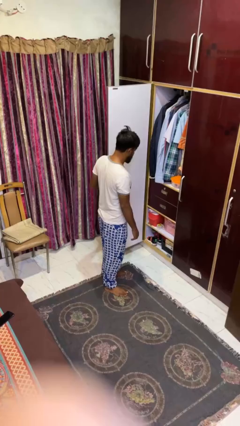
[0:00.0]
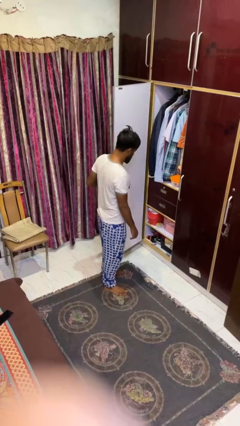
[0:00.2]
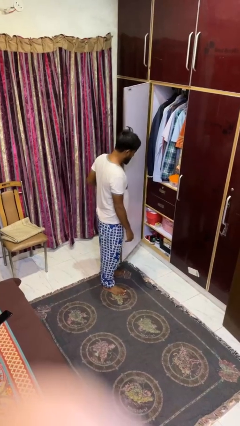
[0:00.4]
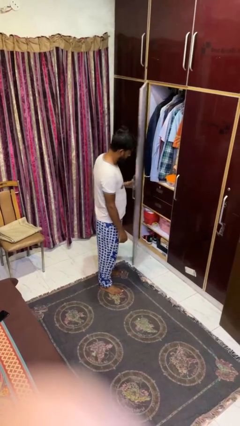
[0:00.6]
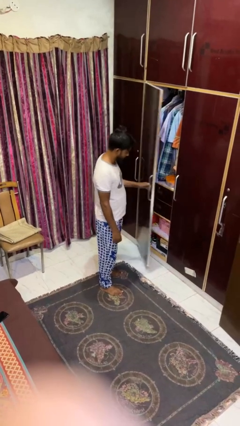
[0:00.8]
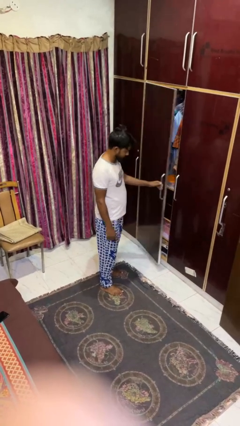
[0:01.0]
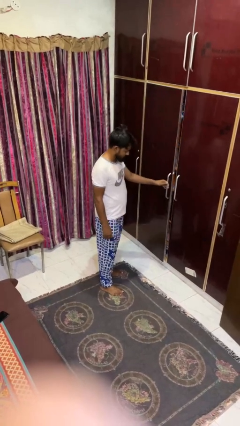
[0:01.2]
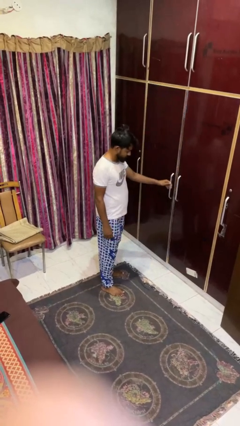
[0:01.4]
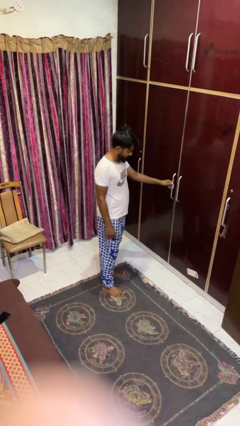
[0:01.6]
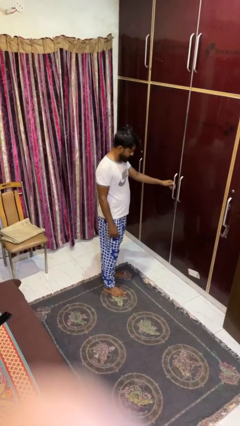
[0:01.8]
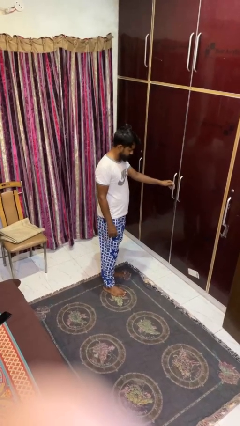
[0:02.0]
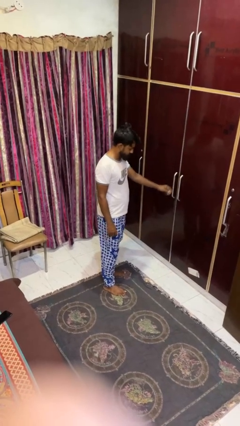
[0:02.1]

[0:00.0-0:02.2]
person closes closet door

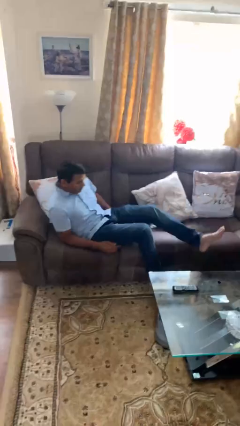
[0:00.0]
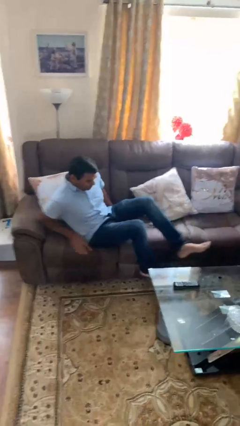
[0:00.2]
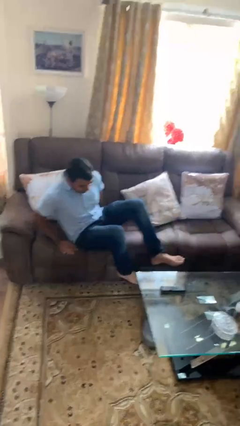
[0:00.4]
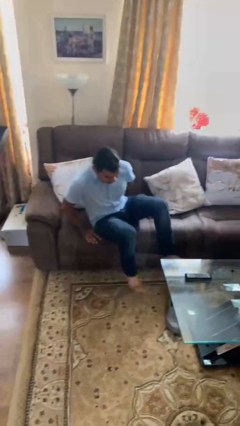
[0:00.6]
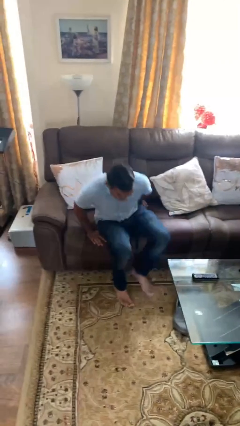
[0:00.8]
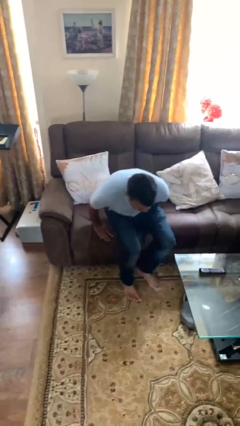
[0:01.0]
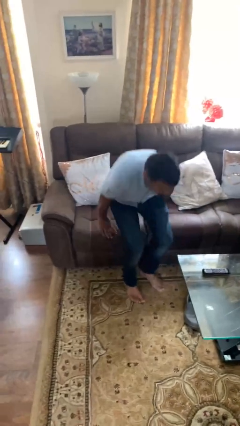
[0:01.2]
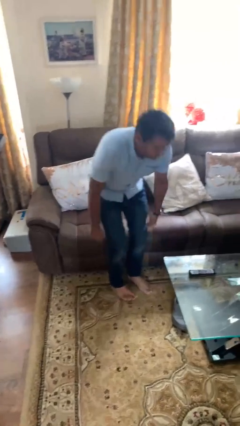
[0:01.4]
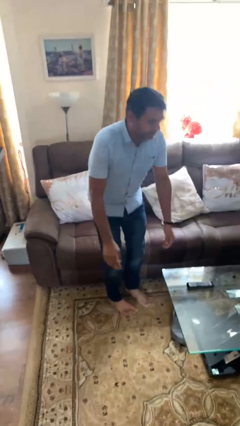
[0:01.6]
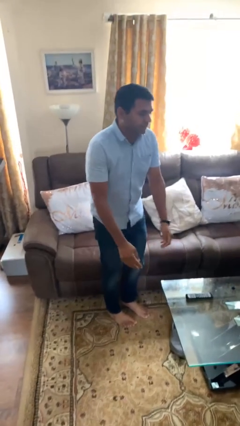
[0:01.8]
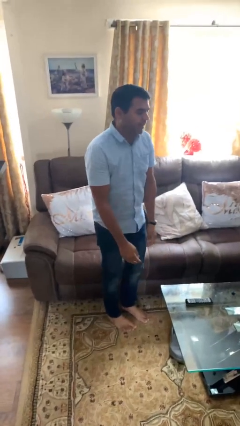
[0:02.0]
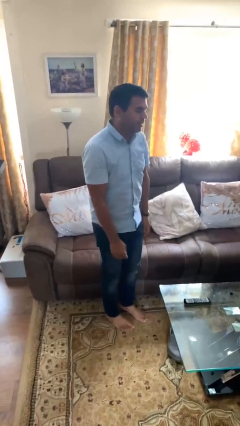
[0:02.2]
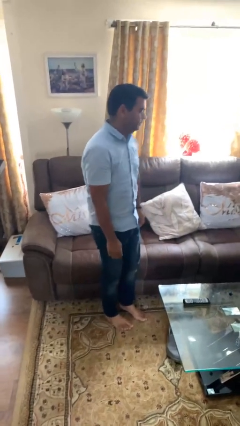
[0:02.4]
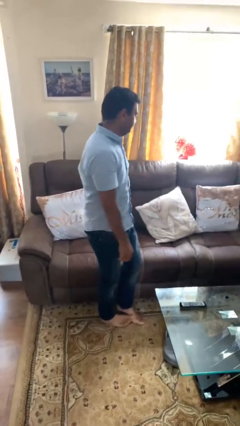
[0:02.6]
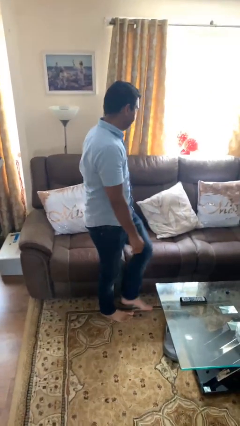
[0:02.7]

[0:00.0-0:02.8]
person stands up

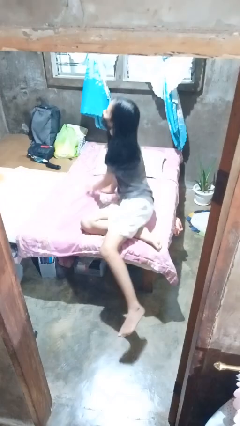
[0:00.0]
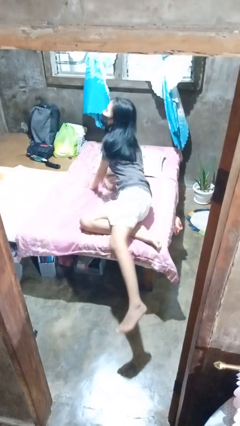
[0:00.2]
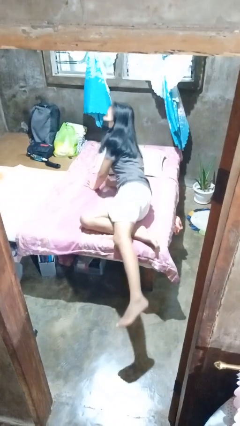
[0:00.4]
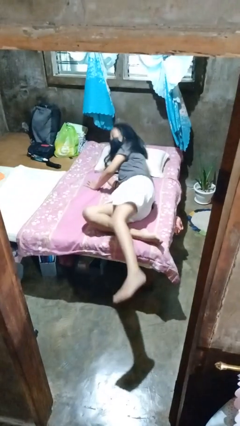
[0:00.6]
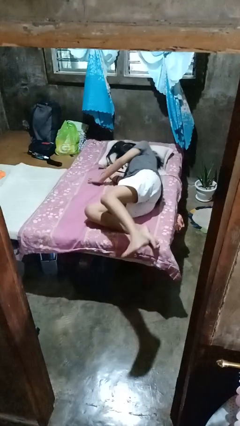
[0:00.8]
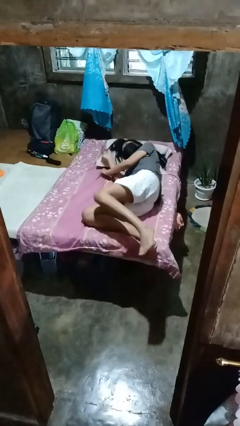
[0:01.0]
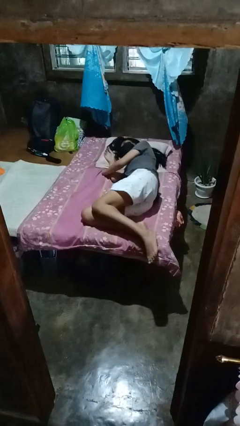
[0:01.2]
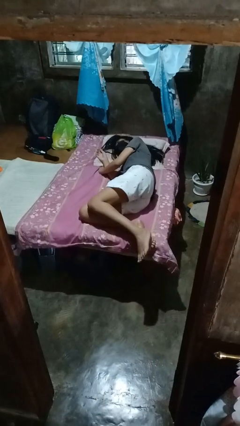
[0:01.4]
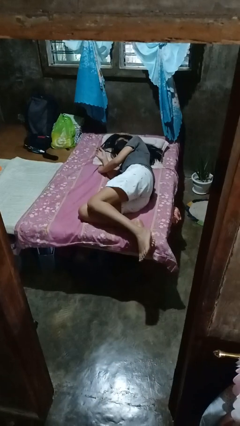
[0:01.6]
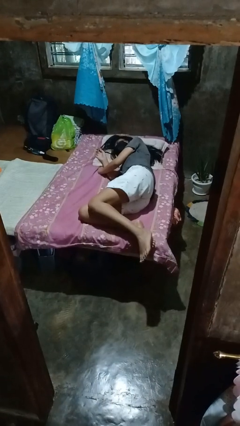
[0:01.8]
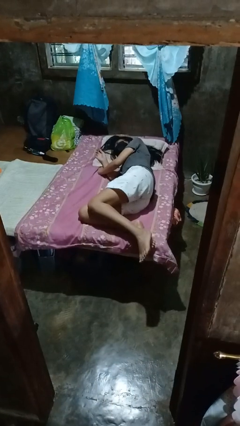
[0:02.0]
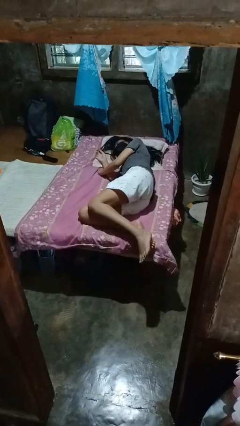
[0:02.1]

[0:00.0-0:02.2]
person lies down on bed

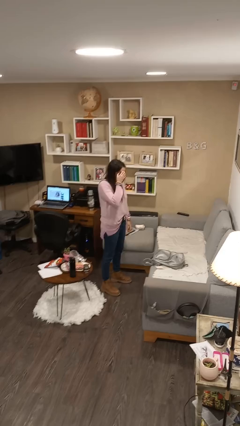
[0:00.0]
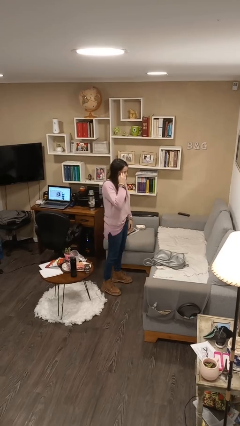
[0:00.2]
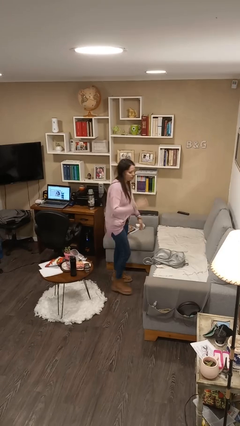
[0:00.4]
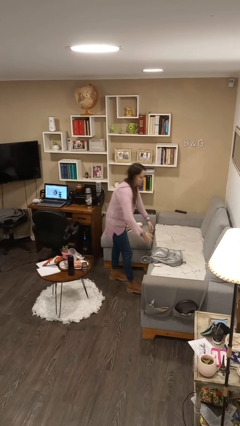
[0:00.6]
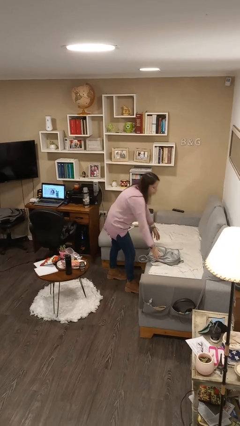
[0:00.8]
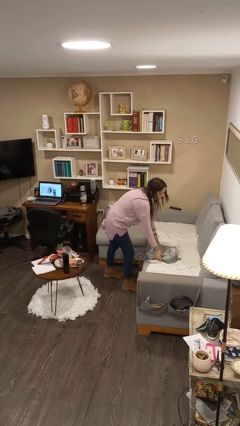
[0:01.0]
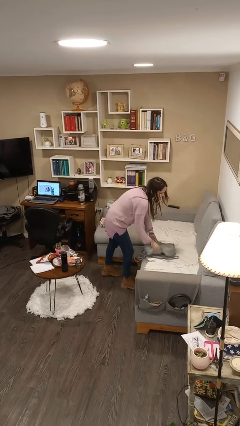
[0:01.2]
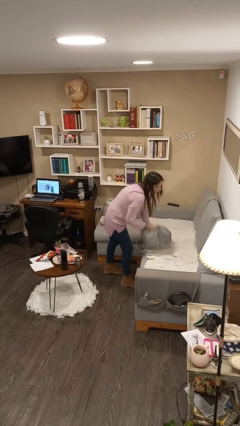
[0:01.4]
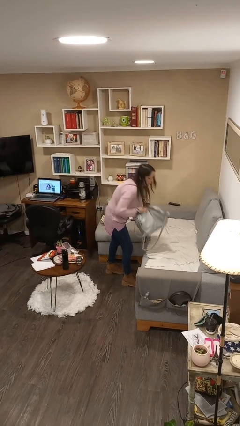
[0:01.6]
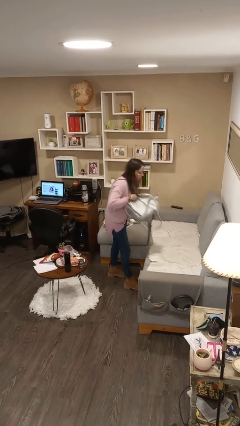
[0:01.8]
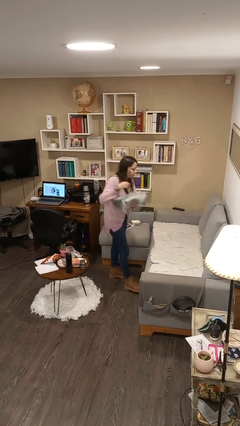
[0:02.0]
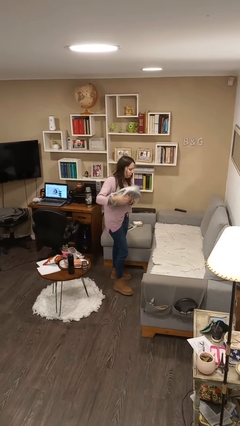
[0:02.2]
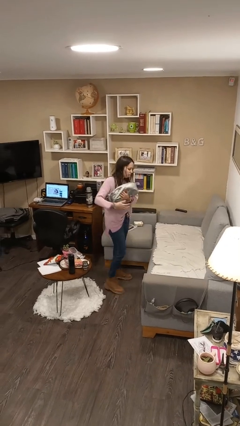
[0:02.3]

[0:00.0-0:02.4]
person picks up object from couch

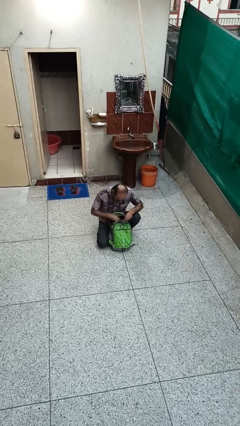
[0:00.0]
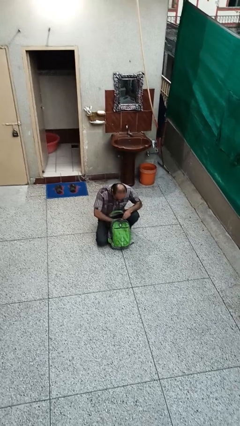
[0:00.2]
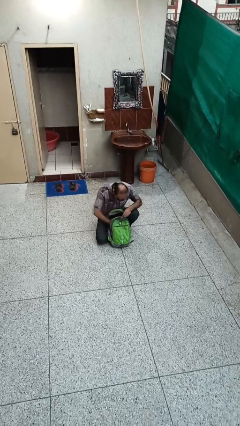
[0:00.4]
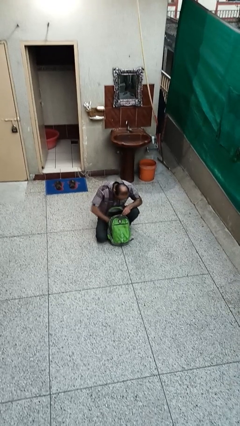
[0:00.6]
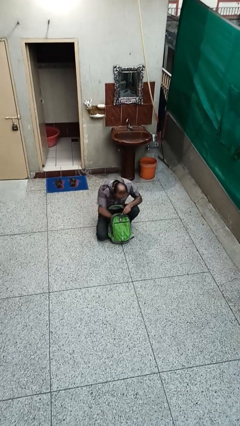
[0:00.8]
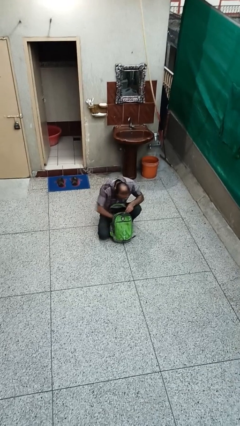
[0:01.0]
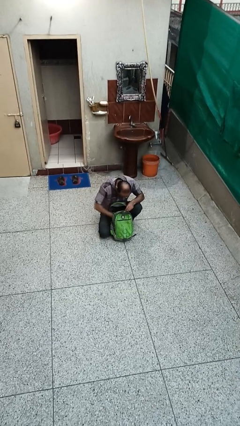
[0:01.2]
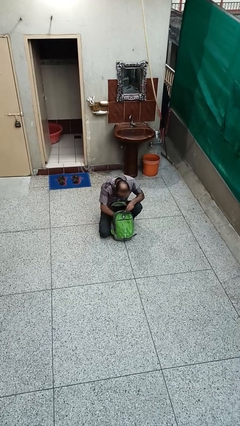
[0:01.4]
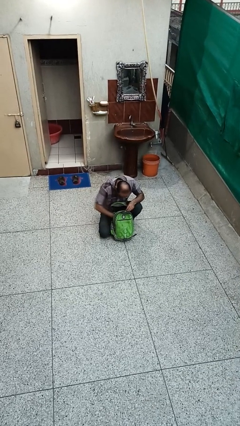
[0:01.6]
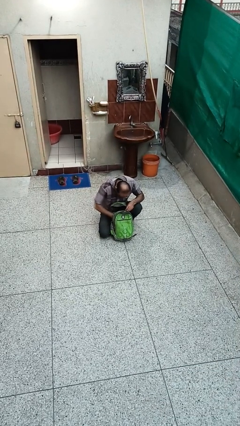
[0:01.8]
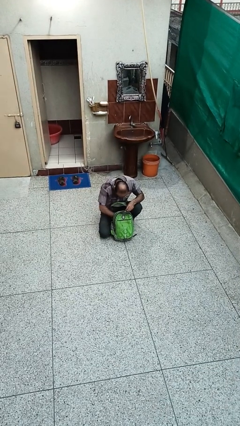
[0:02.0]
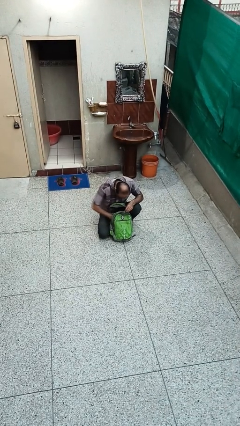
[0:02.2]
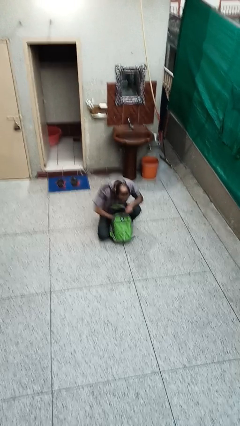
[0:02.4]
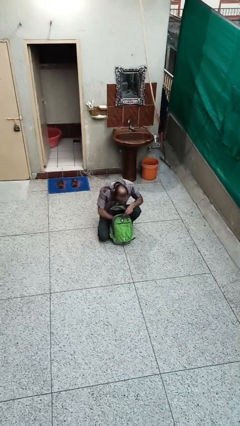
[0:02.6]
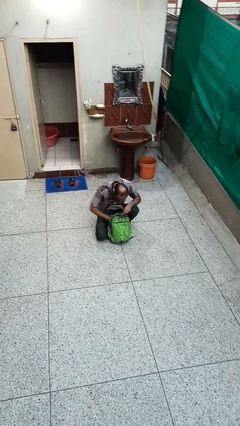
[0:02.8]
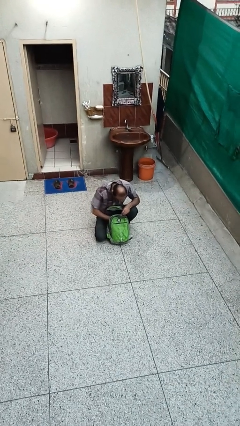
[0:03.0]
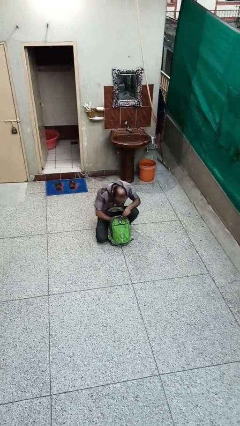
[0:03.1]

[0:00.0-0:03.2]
person searches in backpack

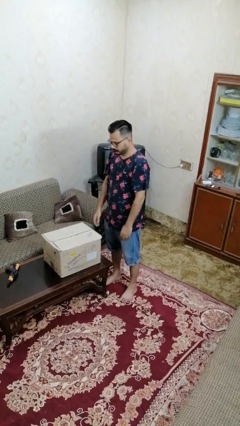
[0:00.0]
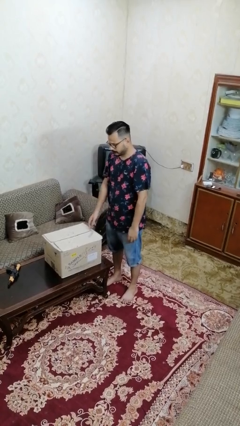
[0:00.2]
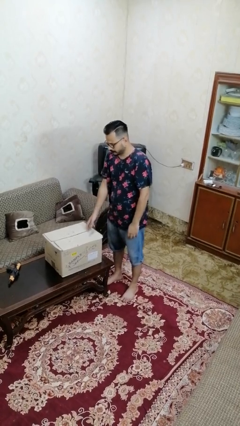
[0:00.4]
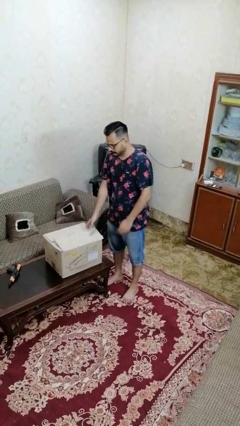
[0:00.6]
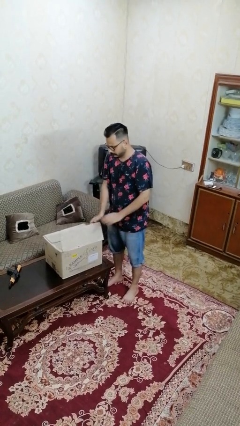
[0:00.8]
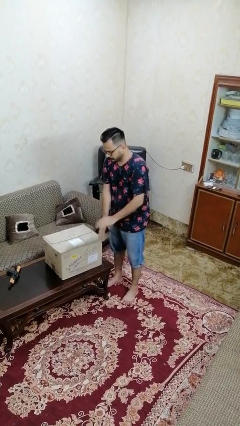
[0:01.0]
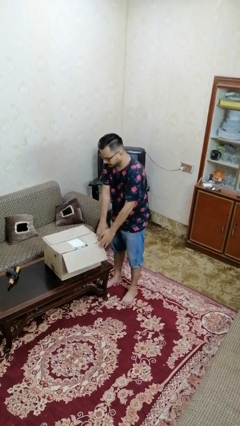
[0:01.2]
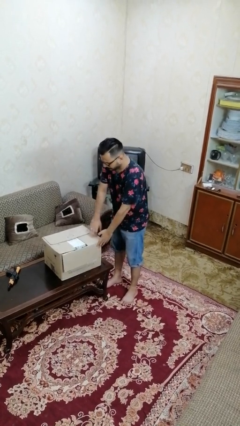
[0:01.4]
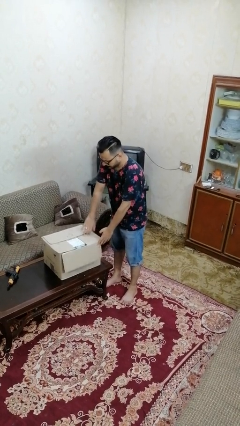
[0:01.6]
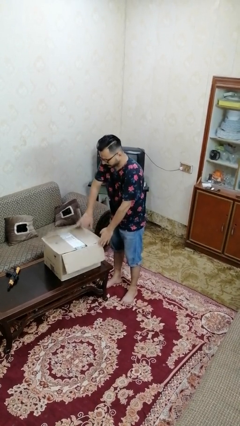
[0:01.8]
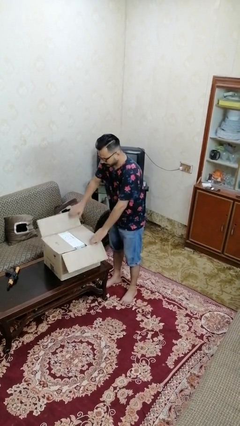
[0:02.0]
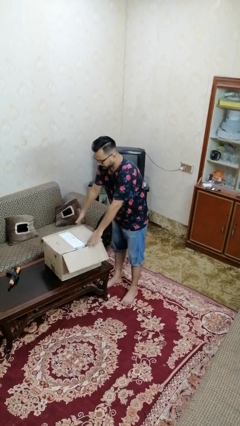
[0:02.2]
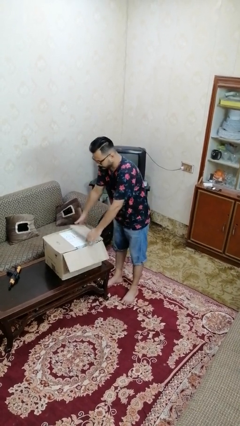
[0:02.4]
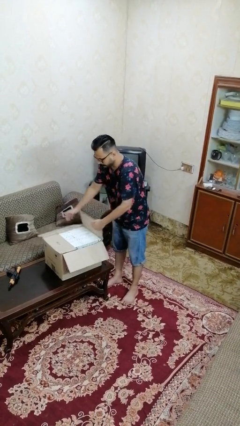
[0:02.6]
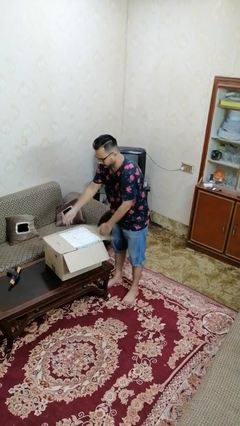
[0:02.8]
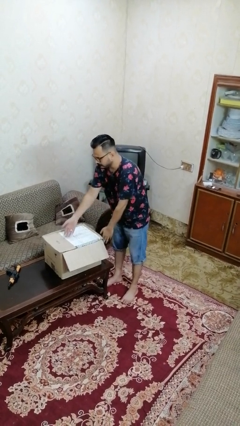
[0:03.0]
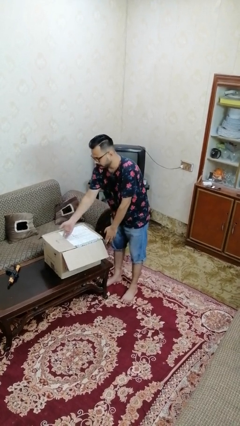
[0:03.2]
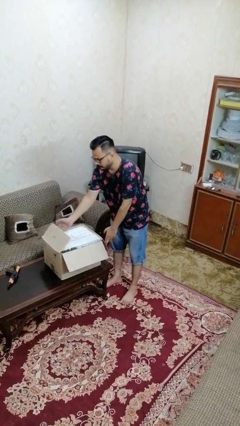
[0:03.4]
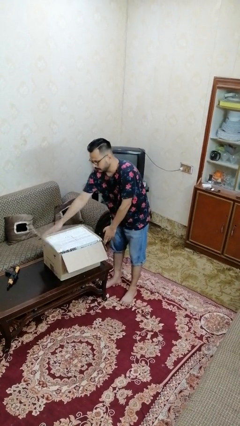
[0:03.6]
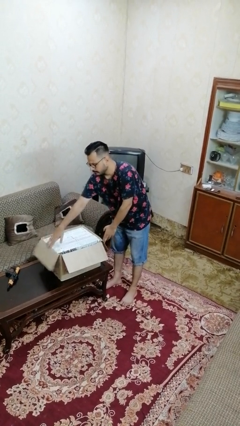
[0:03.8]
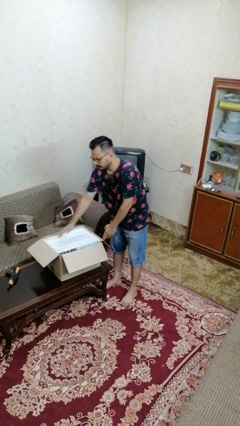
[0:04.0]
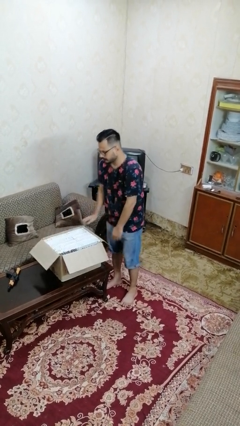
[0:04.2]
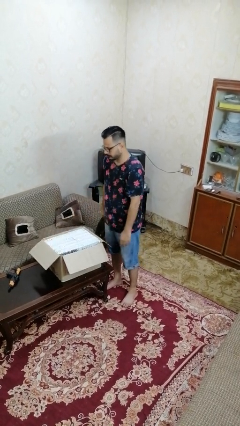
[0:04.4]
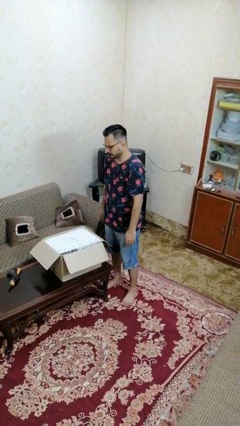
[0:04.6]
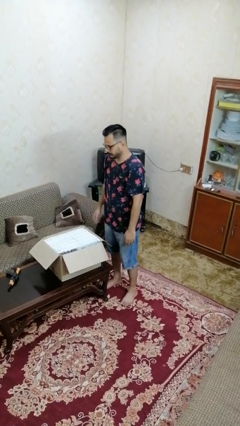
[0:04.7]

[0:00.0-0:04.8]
person opens box
